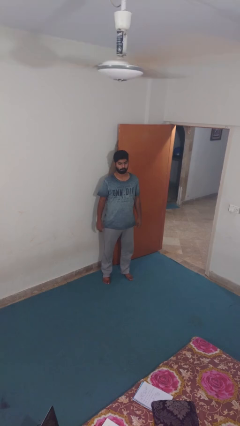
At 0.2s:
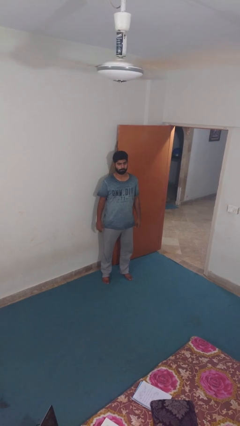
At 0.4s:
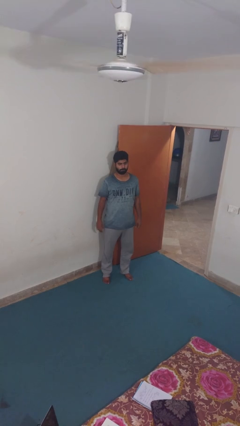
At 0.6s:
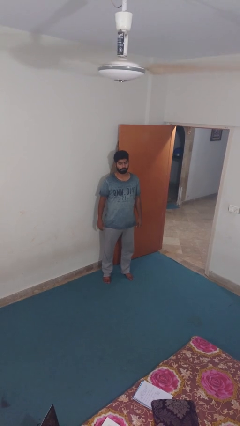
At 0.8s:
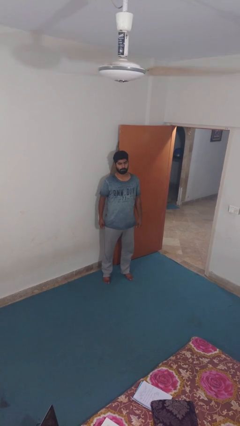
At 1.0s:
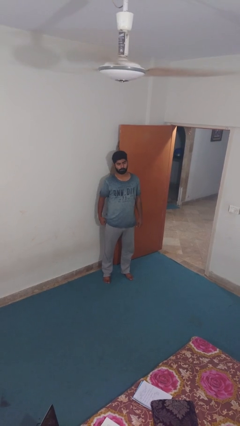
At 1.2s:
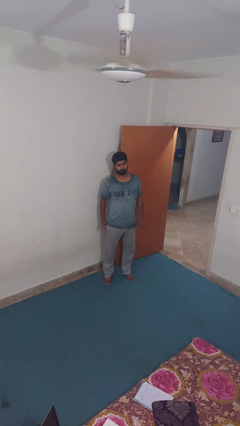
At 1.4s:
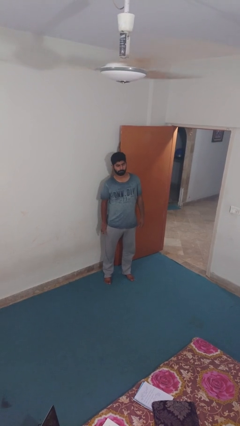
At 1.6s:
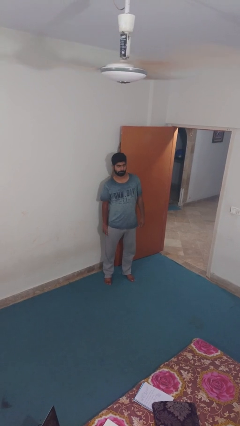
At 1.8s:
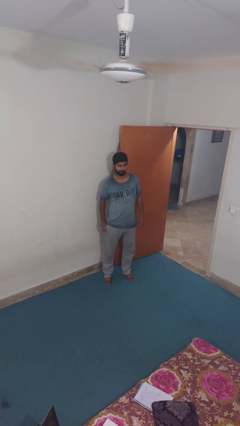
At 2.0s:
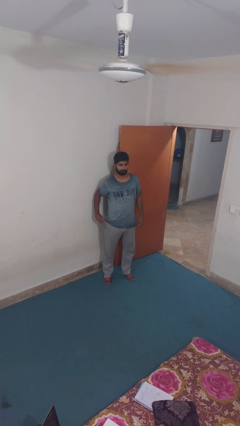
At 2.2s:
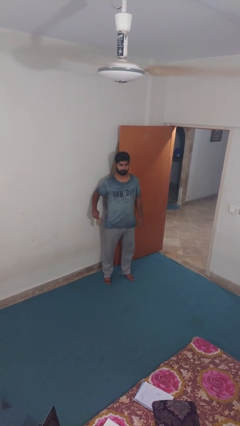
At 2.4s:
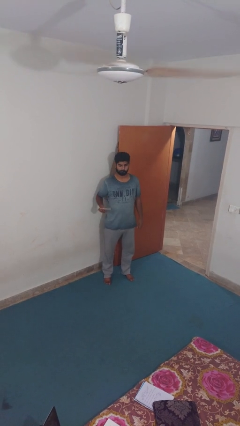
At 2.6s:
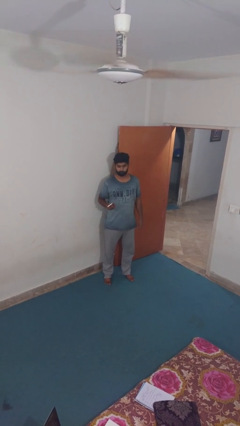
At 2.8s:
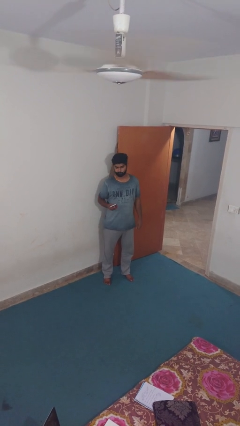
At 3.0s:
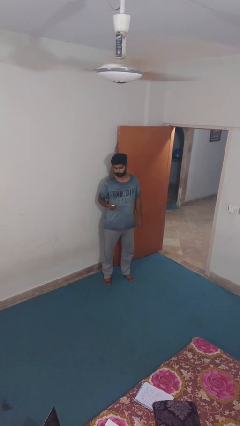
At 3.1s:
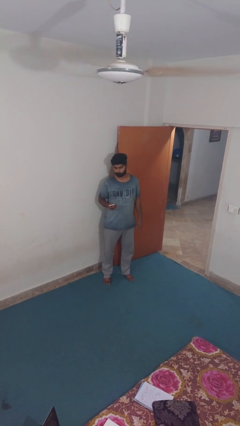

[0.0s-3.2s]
person takes phone from pocket

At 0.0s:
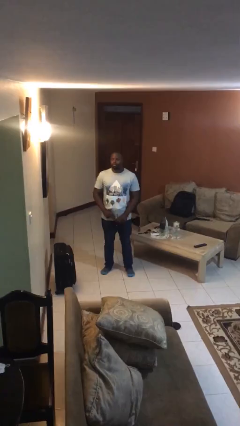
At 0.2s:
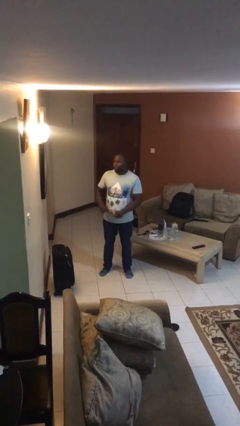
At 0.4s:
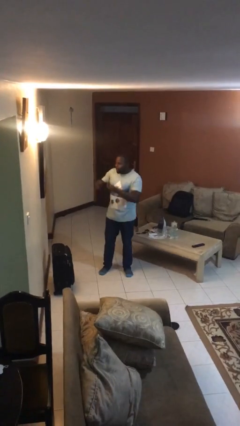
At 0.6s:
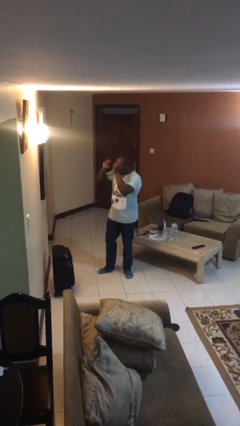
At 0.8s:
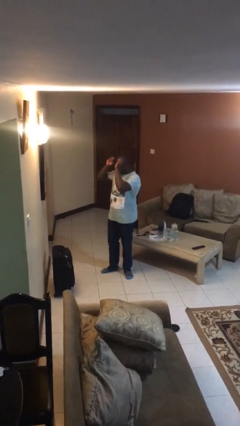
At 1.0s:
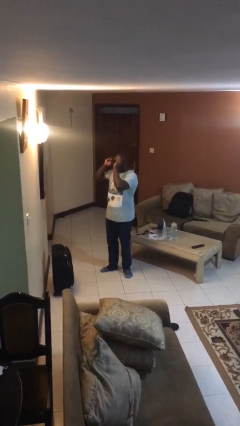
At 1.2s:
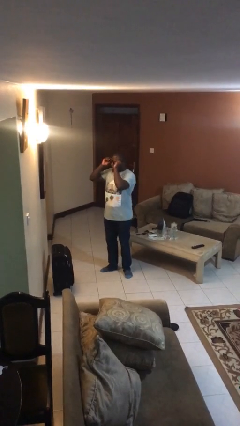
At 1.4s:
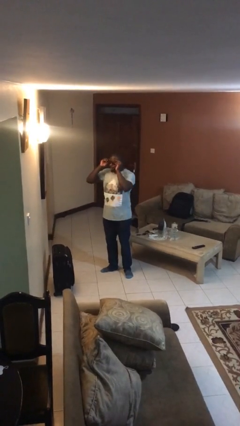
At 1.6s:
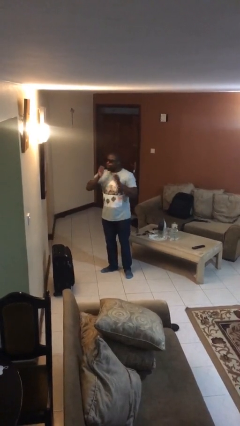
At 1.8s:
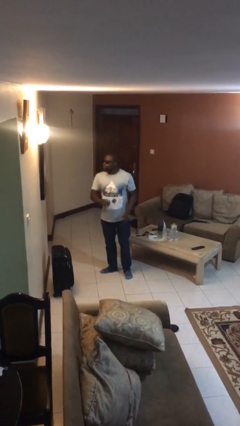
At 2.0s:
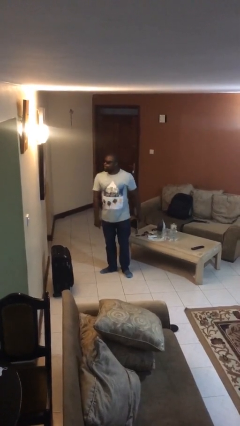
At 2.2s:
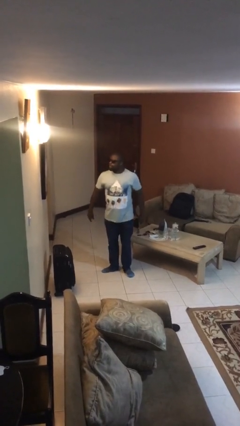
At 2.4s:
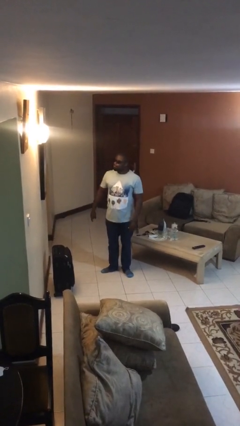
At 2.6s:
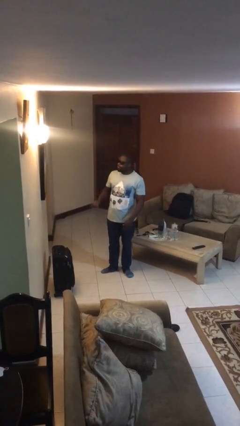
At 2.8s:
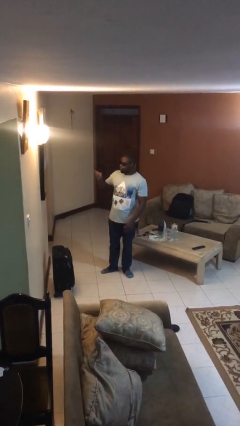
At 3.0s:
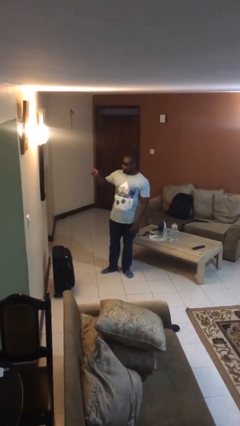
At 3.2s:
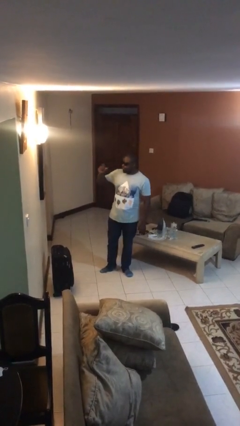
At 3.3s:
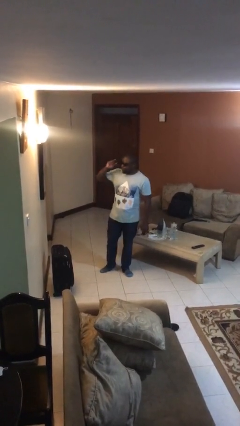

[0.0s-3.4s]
person puts on sunglasses

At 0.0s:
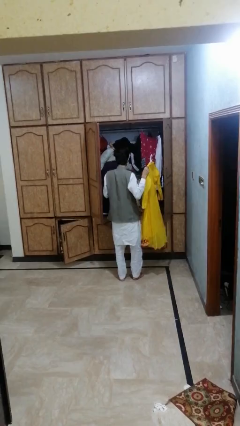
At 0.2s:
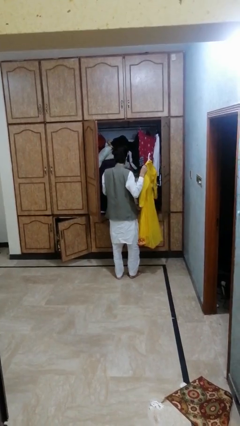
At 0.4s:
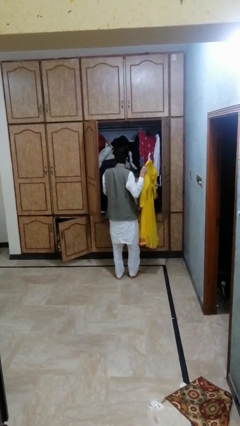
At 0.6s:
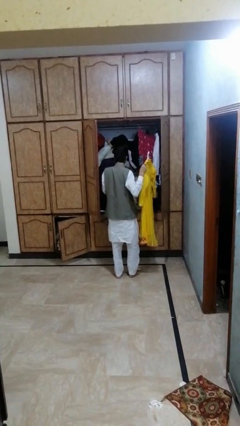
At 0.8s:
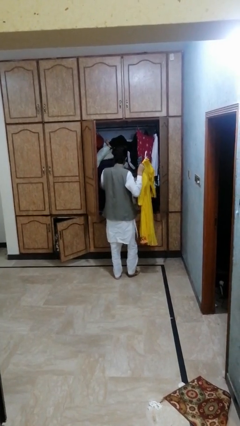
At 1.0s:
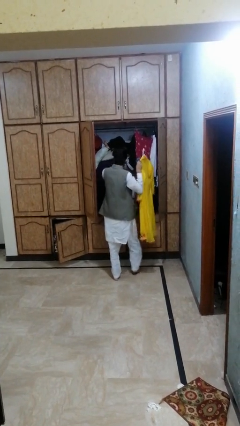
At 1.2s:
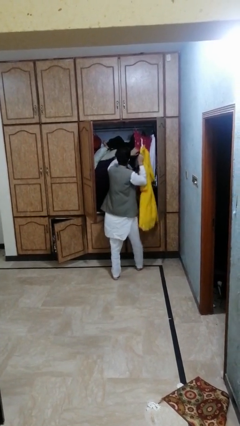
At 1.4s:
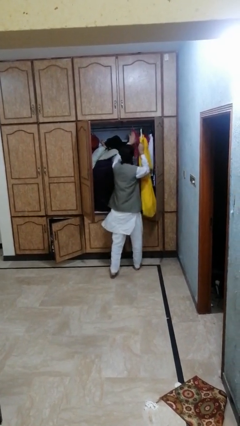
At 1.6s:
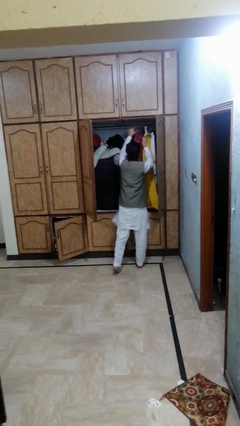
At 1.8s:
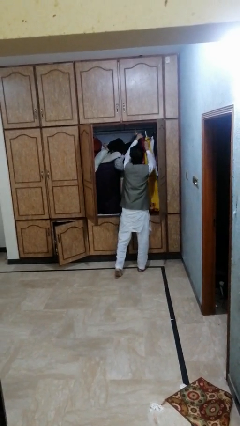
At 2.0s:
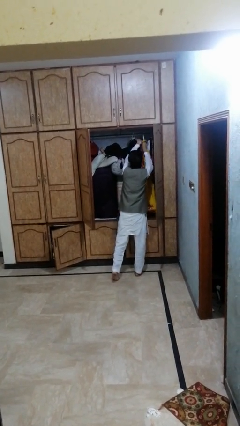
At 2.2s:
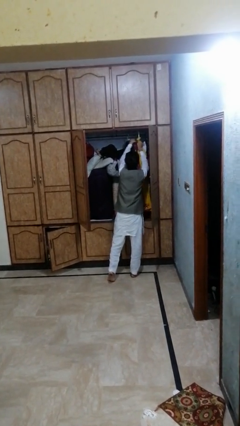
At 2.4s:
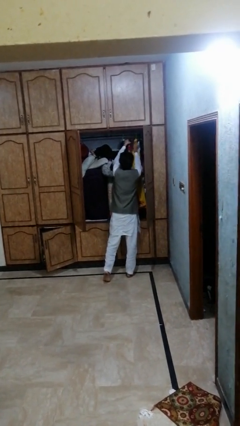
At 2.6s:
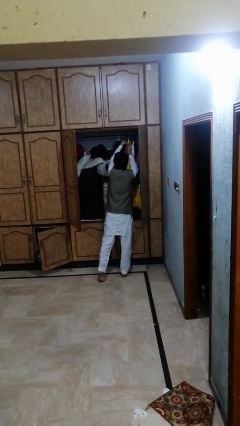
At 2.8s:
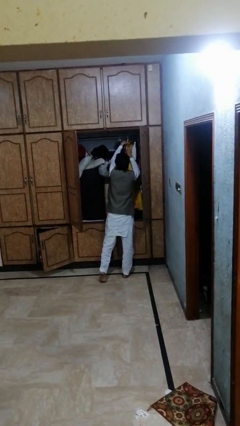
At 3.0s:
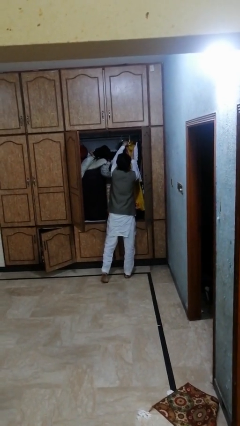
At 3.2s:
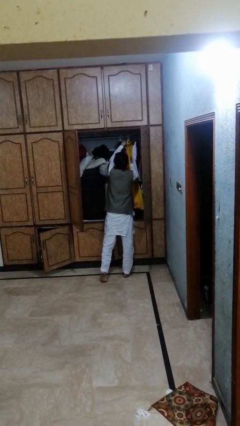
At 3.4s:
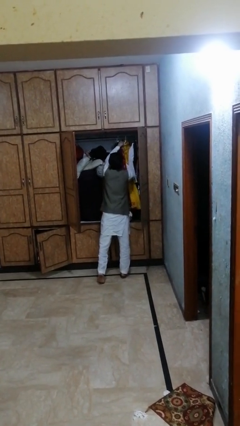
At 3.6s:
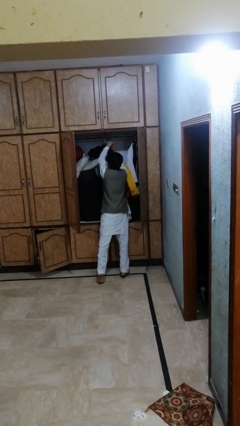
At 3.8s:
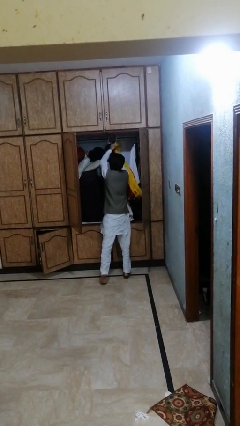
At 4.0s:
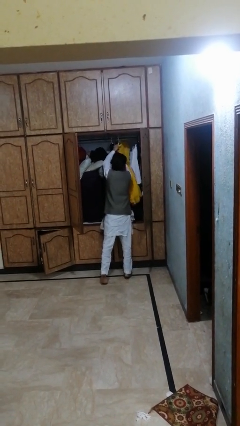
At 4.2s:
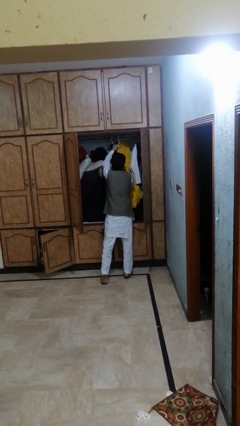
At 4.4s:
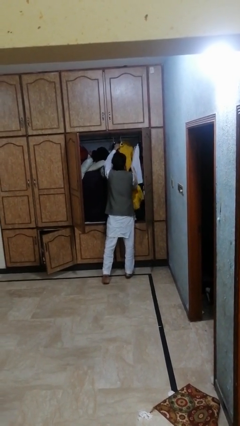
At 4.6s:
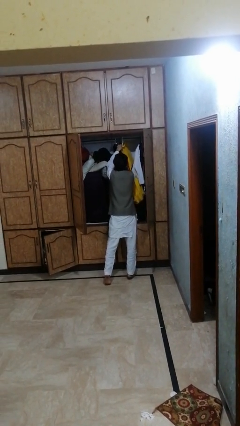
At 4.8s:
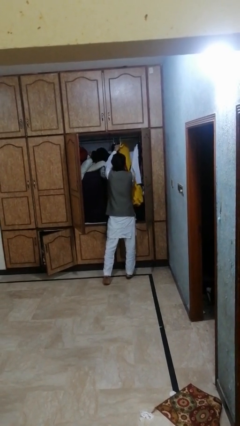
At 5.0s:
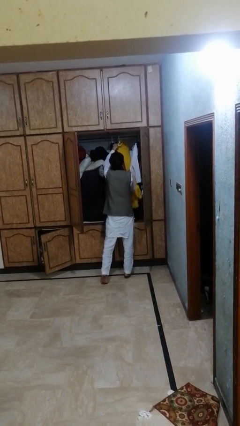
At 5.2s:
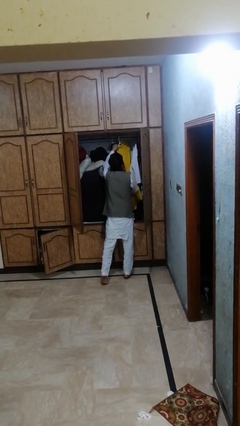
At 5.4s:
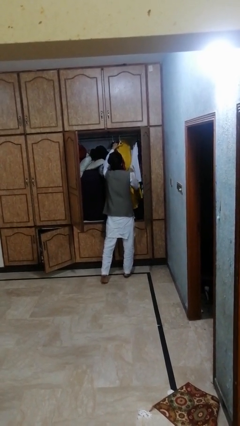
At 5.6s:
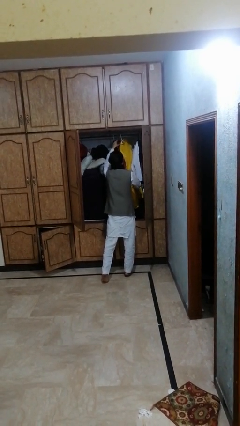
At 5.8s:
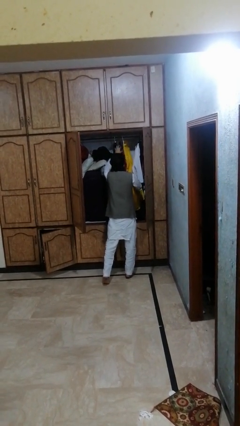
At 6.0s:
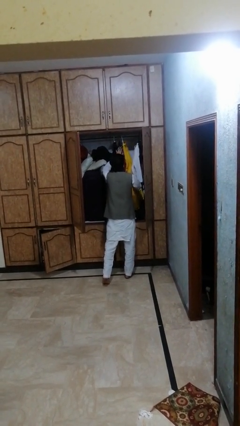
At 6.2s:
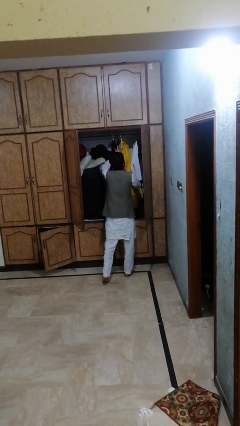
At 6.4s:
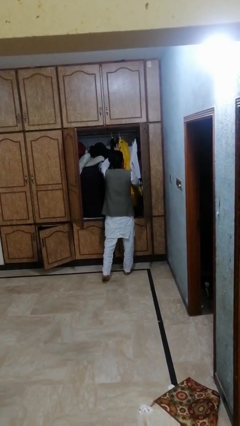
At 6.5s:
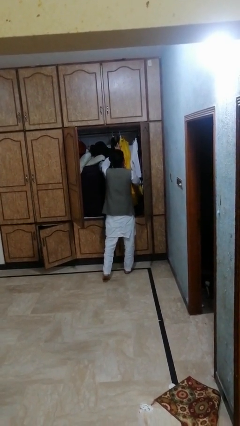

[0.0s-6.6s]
person puts clothes into dresser

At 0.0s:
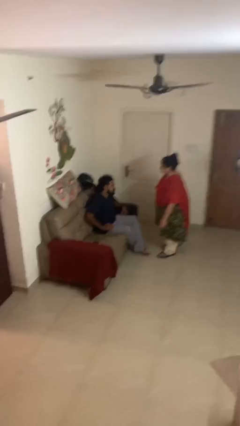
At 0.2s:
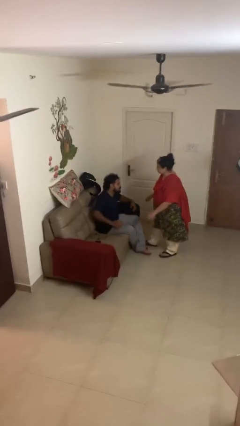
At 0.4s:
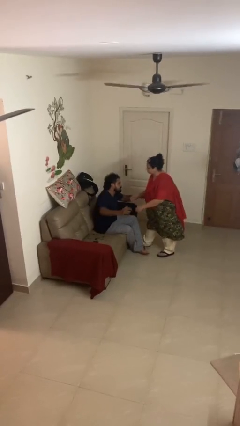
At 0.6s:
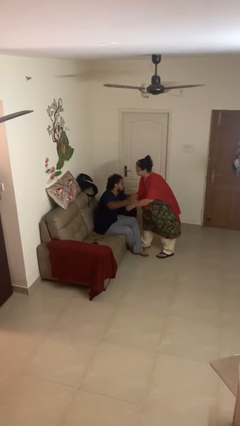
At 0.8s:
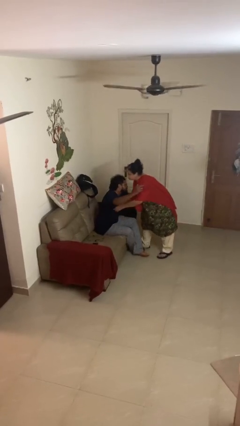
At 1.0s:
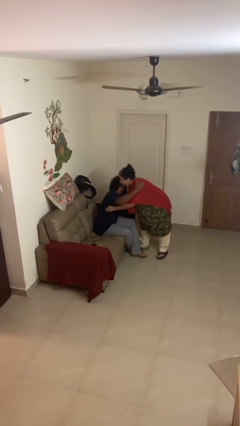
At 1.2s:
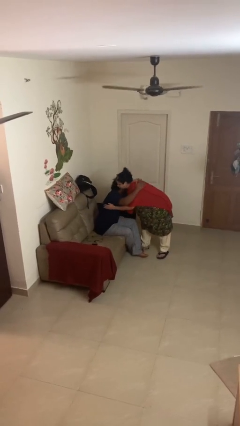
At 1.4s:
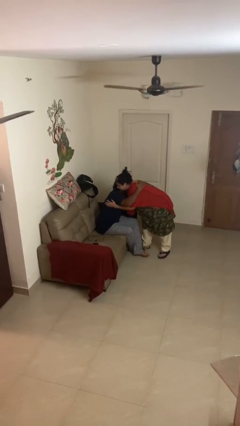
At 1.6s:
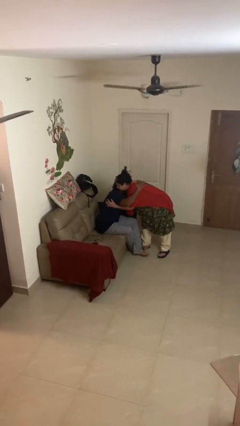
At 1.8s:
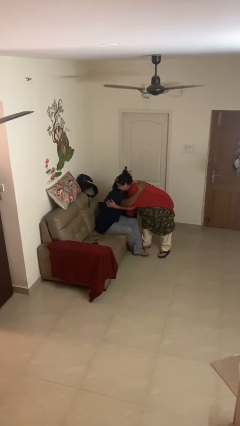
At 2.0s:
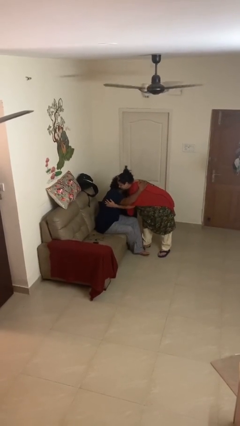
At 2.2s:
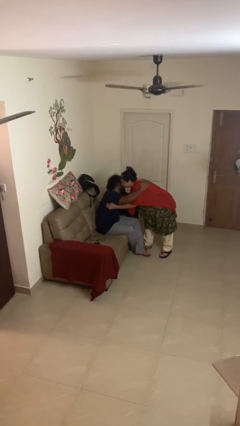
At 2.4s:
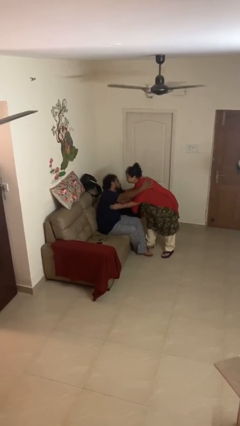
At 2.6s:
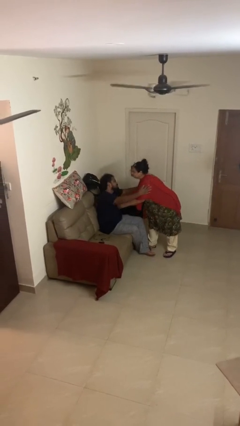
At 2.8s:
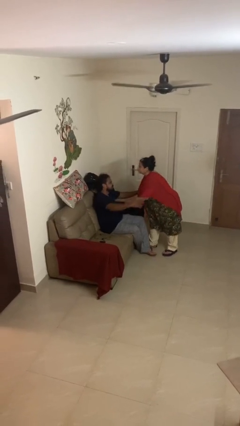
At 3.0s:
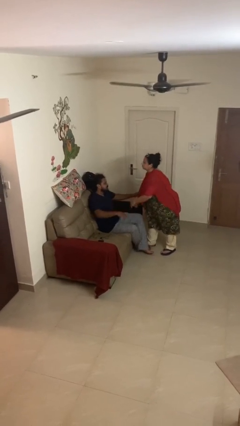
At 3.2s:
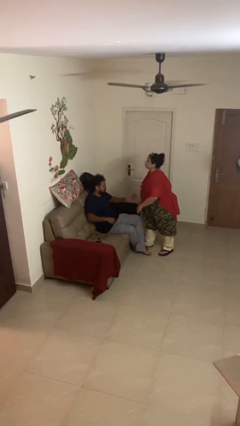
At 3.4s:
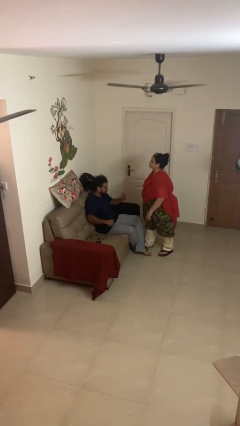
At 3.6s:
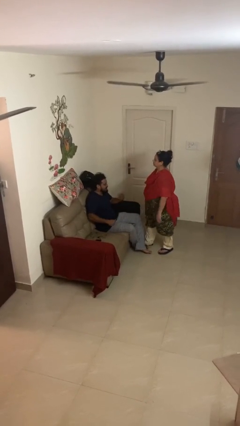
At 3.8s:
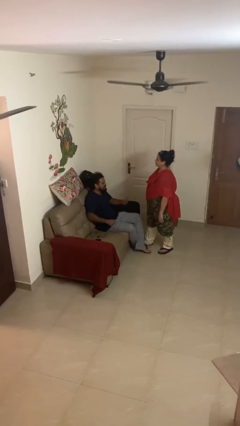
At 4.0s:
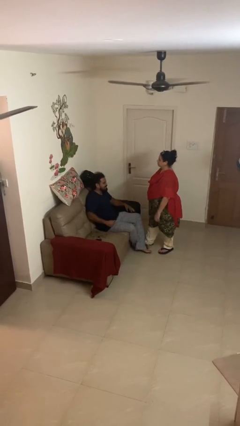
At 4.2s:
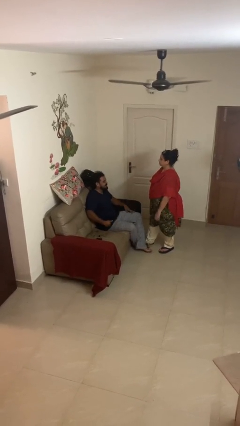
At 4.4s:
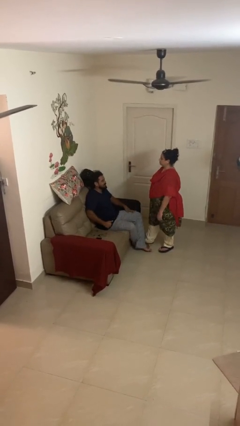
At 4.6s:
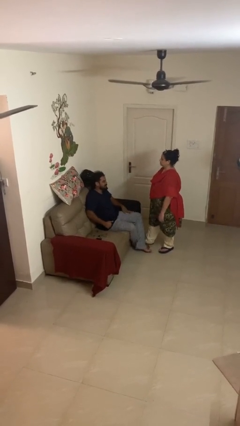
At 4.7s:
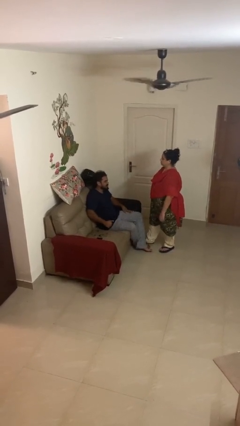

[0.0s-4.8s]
person embraces person
